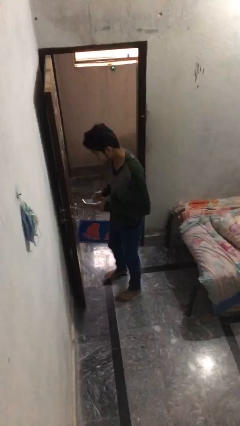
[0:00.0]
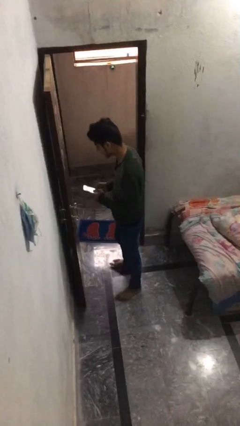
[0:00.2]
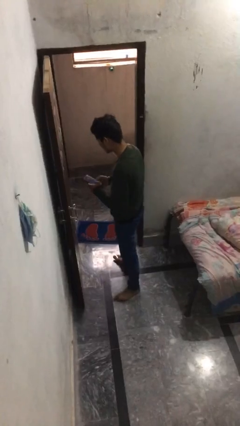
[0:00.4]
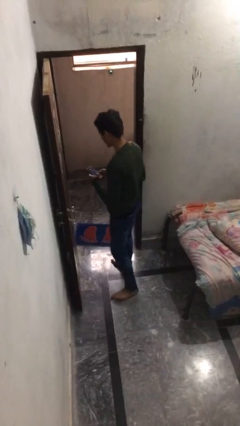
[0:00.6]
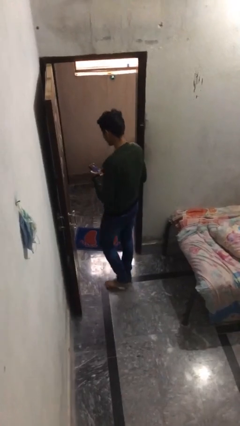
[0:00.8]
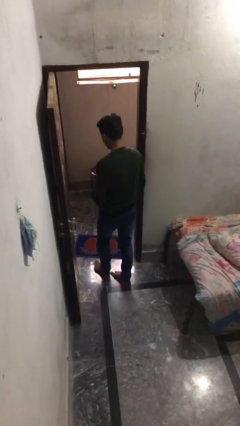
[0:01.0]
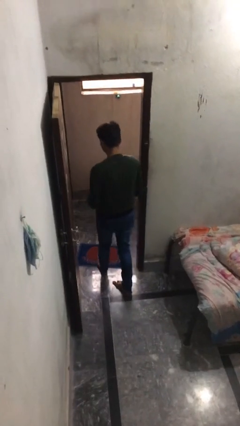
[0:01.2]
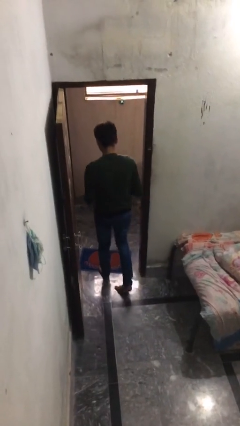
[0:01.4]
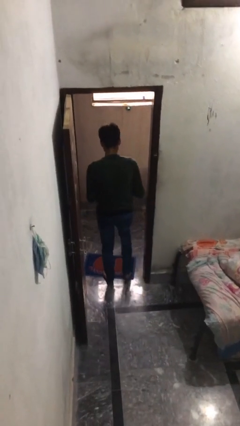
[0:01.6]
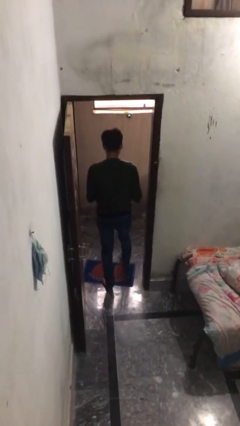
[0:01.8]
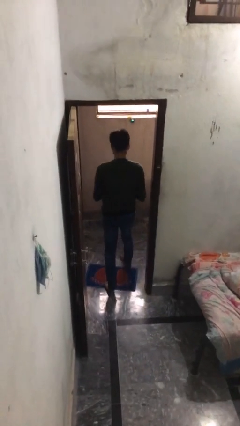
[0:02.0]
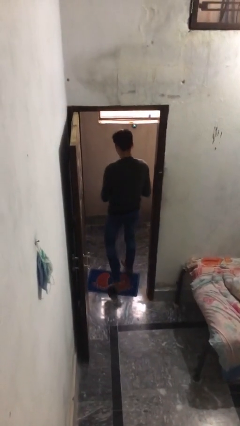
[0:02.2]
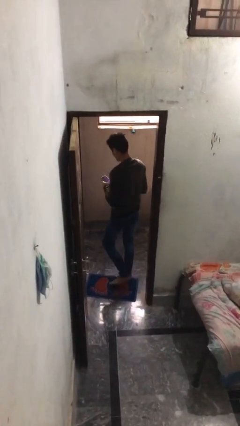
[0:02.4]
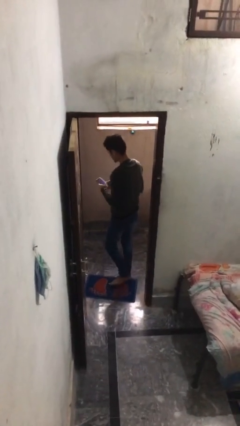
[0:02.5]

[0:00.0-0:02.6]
person exits scene through structure

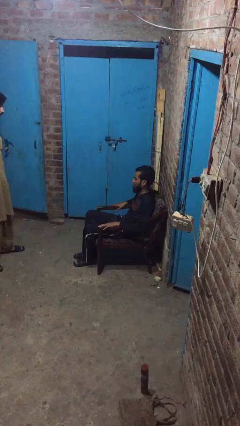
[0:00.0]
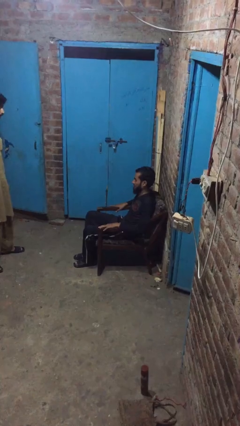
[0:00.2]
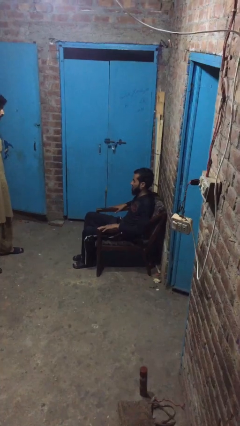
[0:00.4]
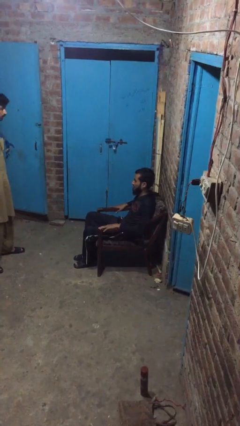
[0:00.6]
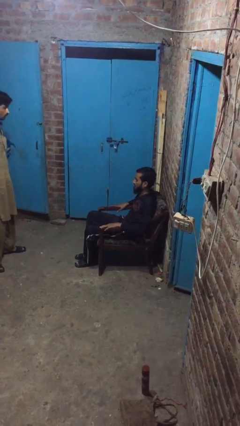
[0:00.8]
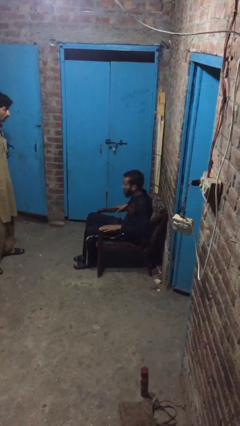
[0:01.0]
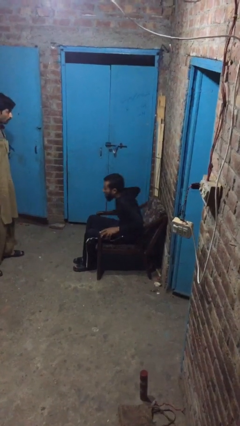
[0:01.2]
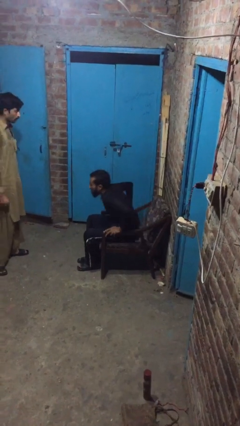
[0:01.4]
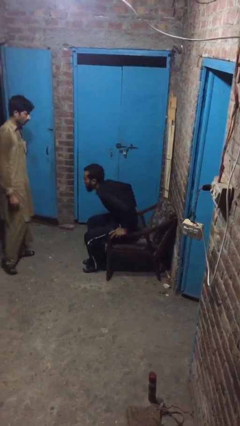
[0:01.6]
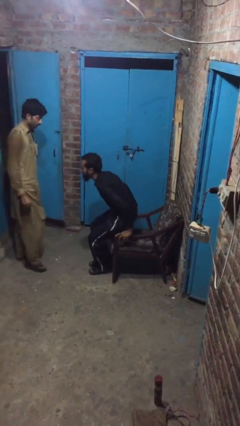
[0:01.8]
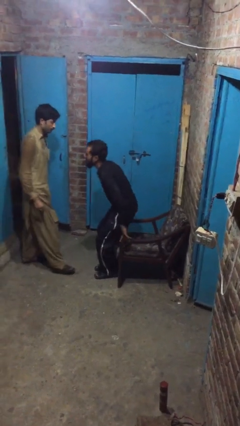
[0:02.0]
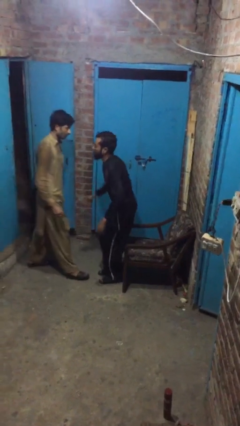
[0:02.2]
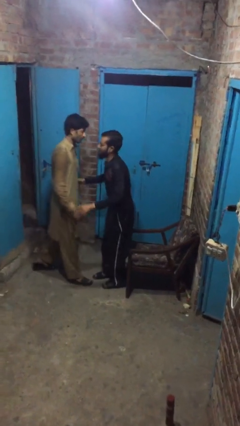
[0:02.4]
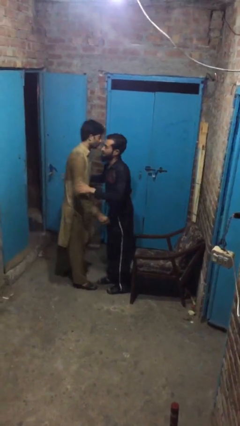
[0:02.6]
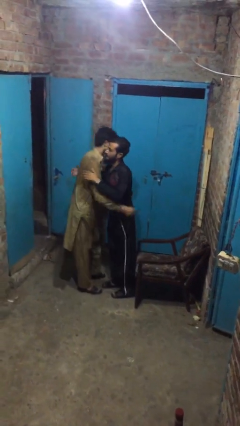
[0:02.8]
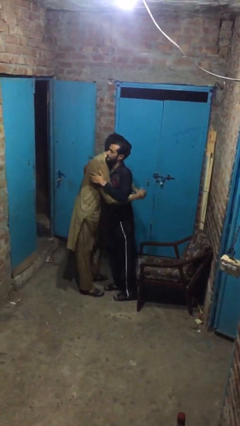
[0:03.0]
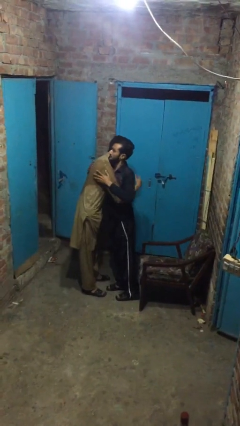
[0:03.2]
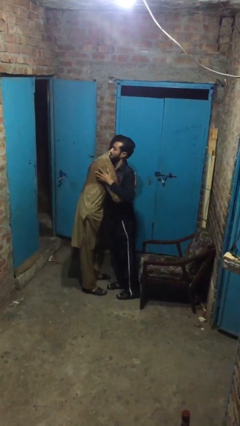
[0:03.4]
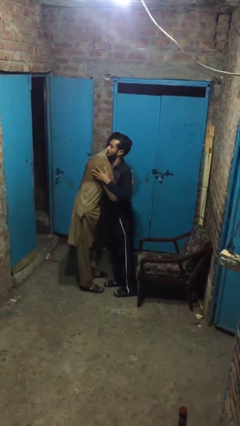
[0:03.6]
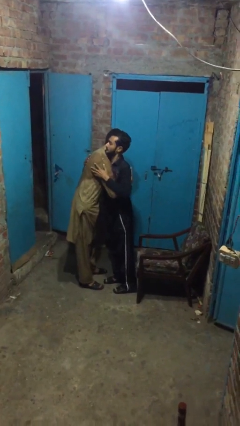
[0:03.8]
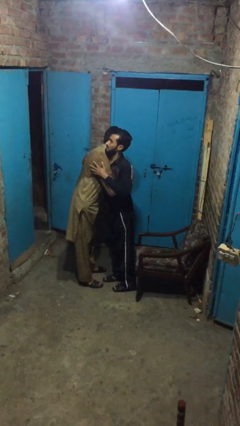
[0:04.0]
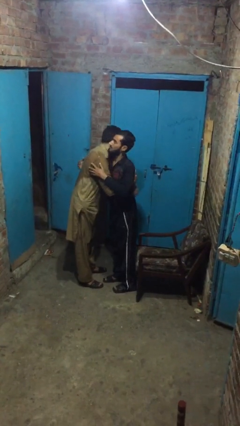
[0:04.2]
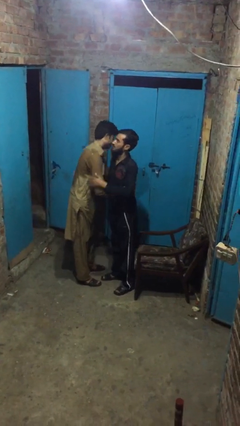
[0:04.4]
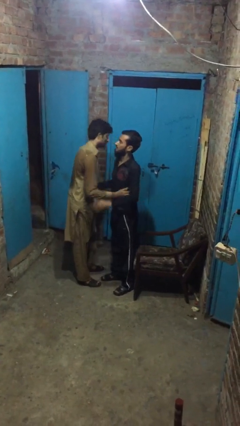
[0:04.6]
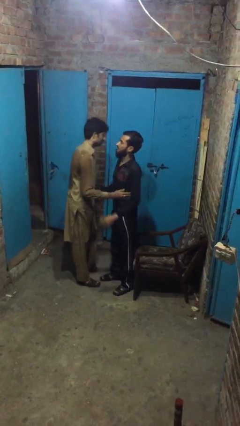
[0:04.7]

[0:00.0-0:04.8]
person embraces person

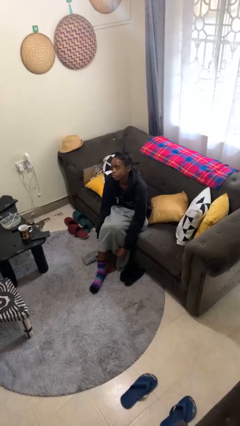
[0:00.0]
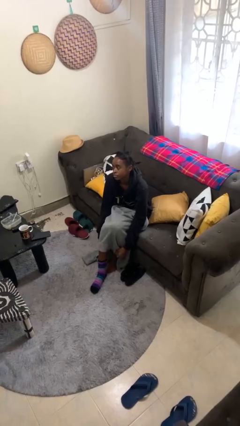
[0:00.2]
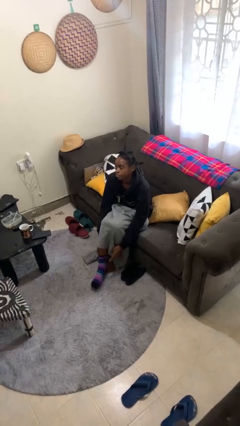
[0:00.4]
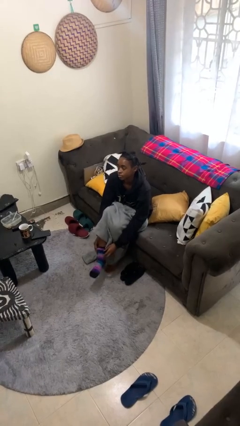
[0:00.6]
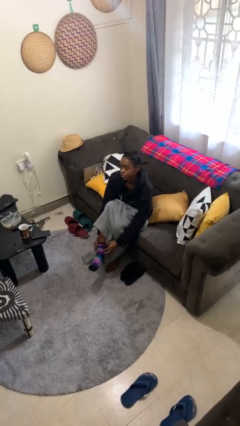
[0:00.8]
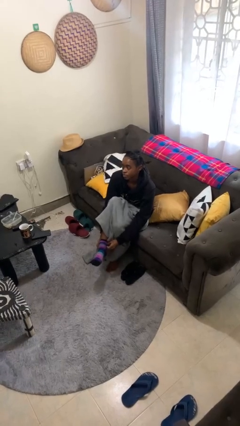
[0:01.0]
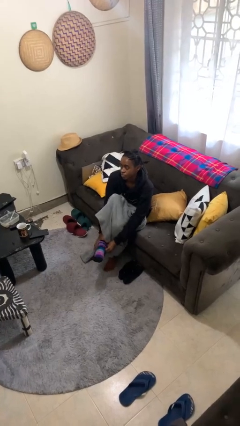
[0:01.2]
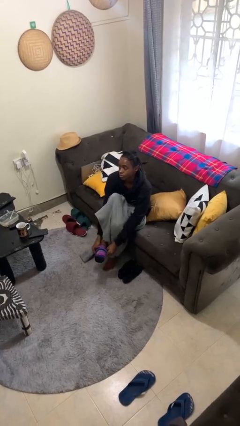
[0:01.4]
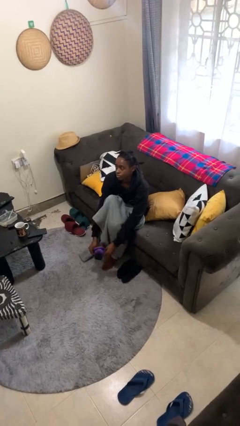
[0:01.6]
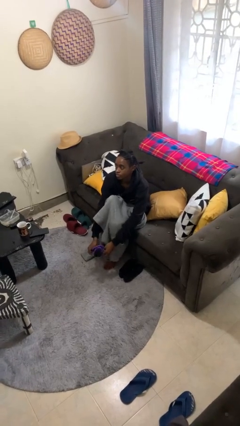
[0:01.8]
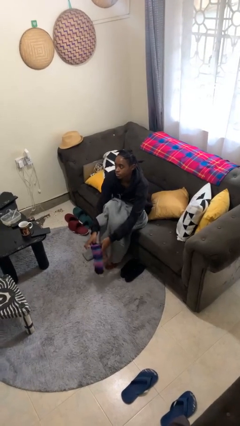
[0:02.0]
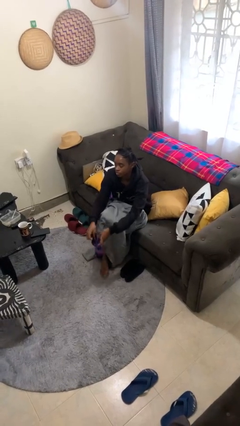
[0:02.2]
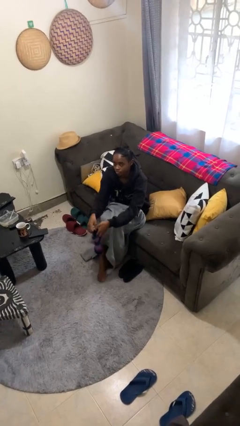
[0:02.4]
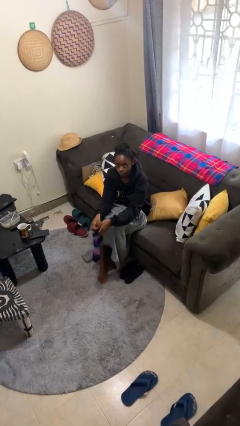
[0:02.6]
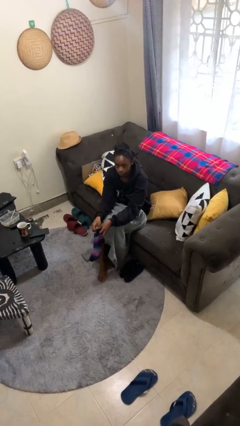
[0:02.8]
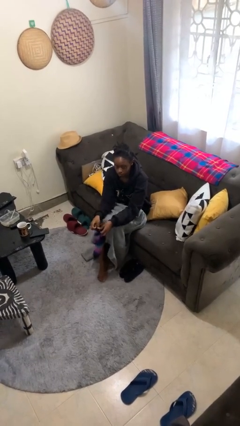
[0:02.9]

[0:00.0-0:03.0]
person takes off socks

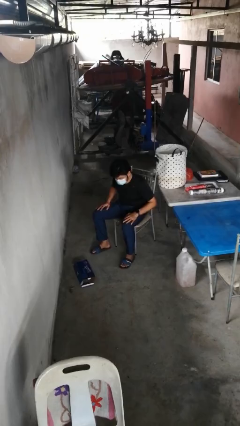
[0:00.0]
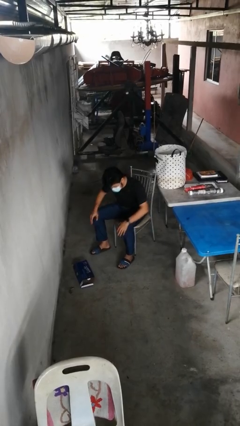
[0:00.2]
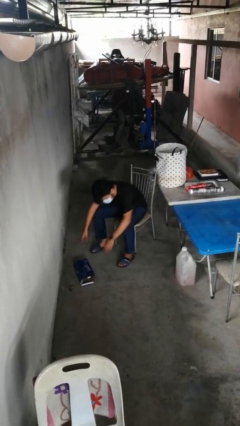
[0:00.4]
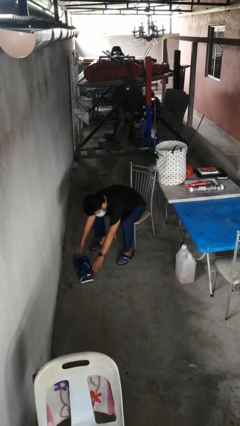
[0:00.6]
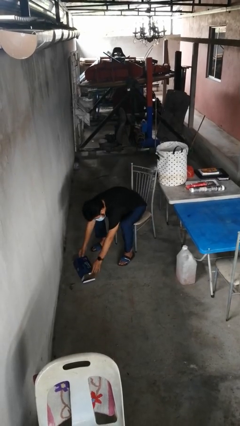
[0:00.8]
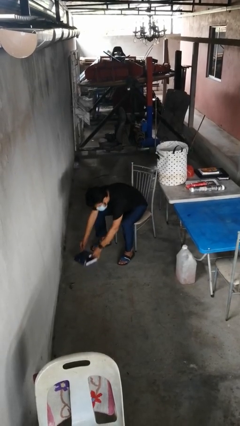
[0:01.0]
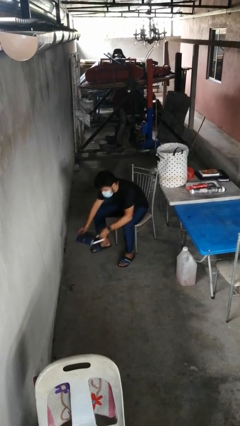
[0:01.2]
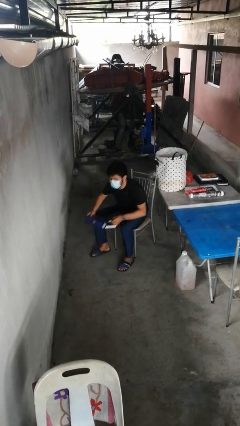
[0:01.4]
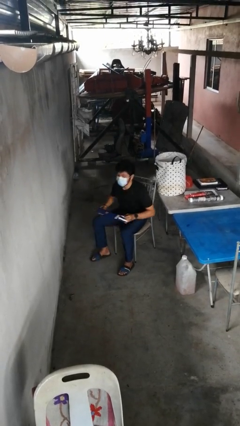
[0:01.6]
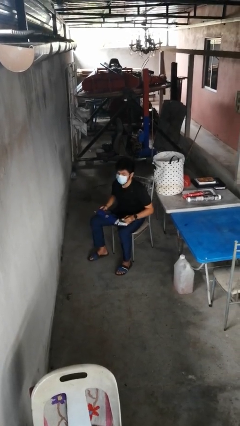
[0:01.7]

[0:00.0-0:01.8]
person picks up object from floor

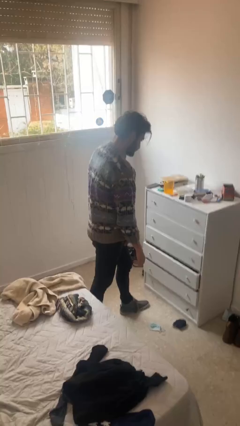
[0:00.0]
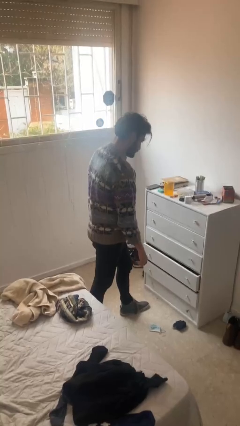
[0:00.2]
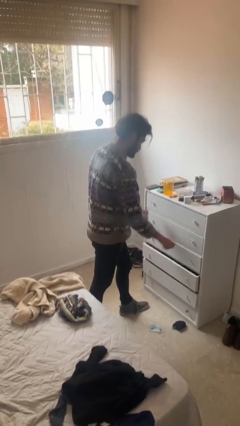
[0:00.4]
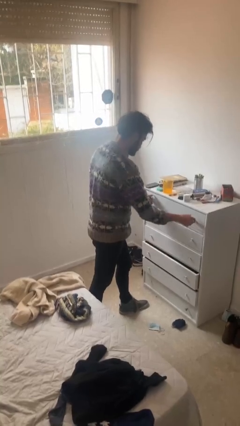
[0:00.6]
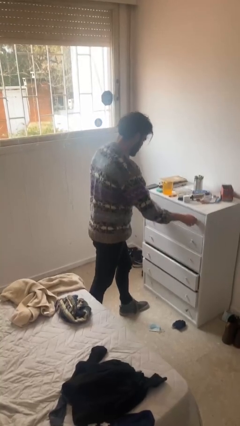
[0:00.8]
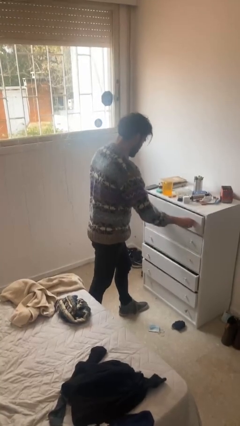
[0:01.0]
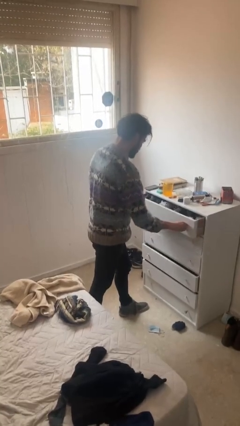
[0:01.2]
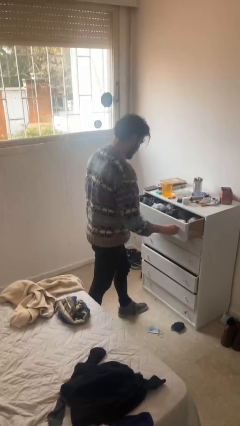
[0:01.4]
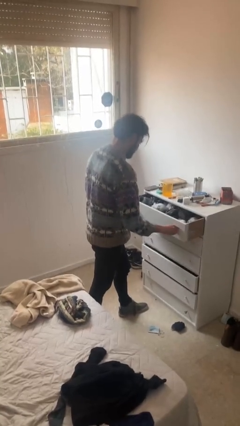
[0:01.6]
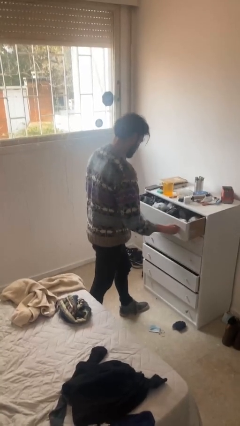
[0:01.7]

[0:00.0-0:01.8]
person opens dresser drawer

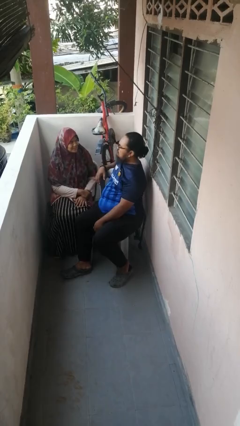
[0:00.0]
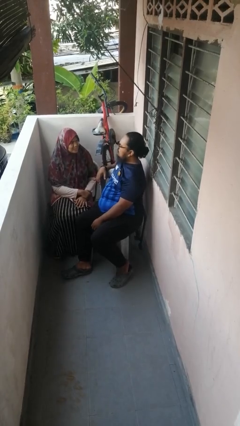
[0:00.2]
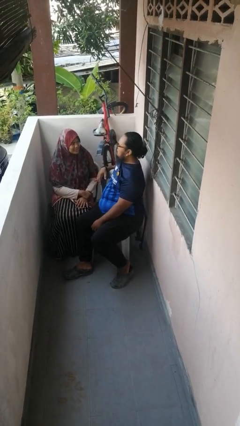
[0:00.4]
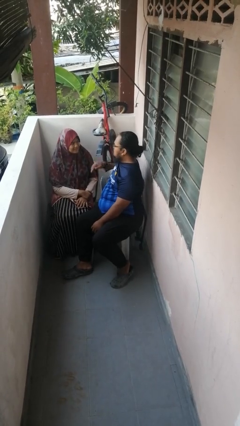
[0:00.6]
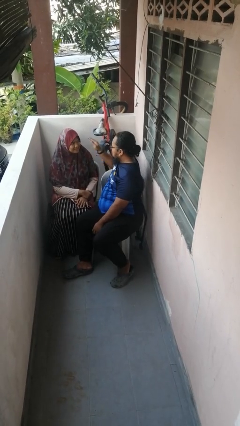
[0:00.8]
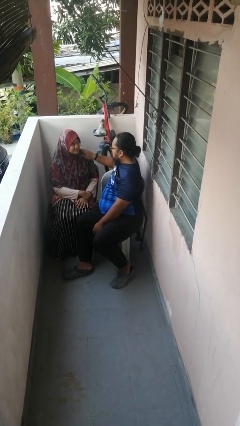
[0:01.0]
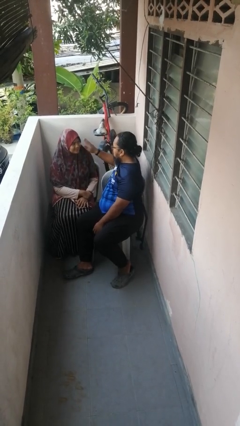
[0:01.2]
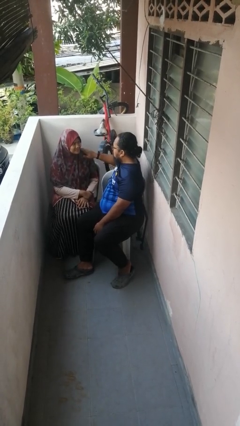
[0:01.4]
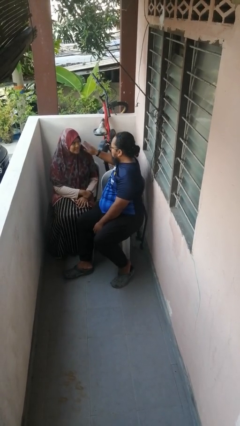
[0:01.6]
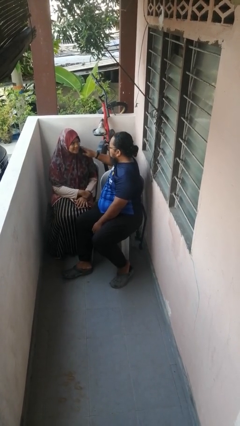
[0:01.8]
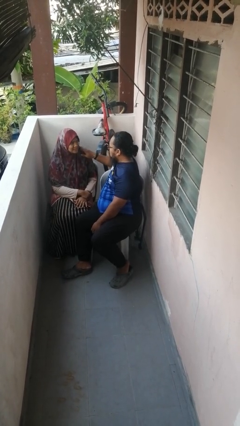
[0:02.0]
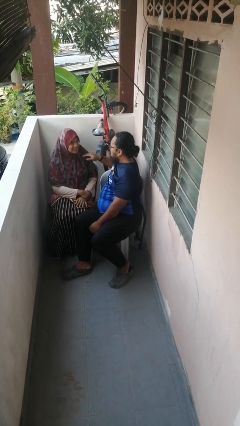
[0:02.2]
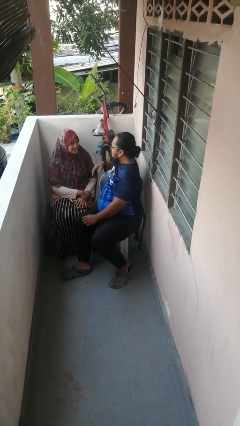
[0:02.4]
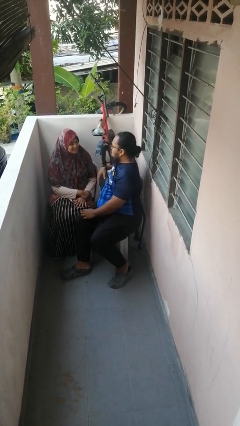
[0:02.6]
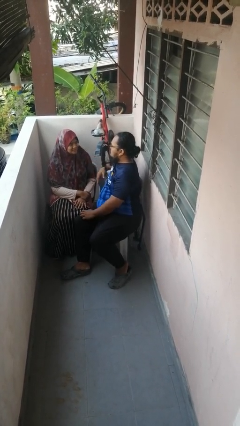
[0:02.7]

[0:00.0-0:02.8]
person pounds shoulders of person

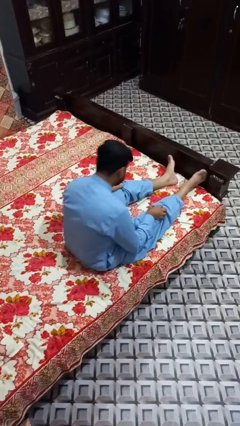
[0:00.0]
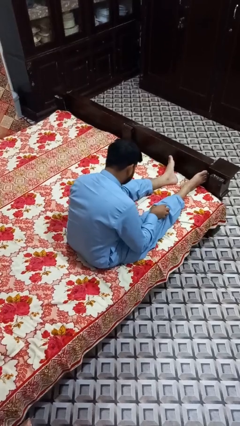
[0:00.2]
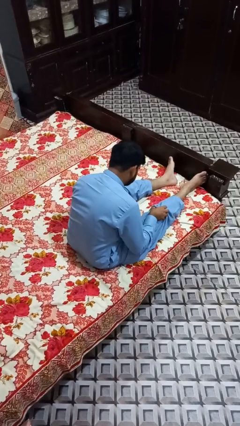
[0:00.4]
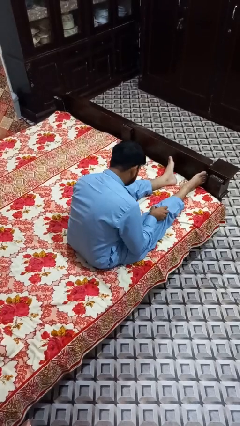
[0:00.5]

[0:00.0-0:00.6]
person crosses legs
